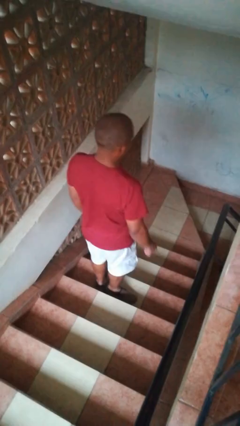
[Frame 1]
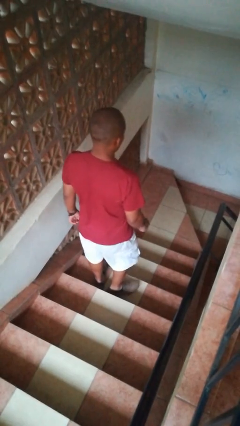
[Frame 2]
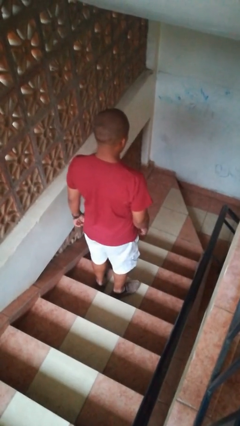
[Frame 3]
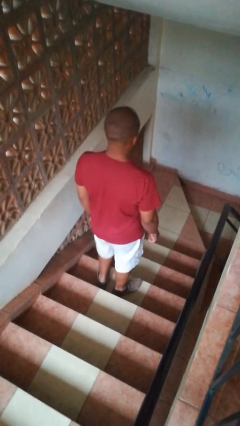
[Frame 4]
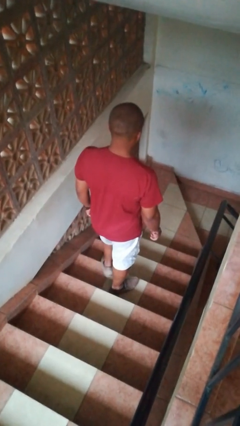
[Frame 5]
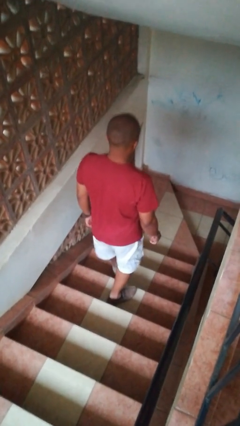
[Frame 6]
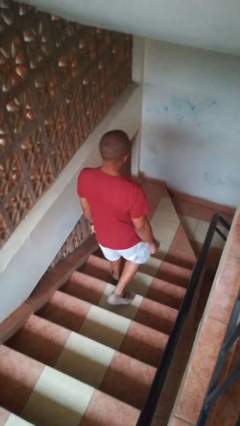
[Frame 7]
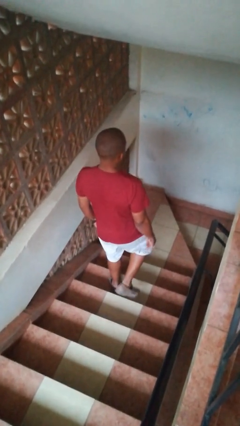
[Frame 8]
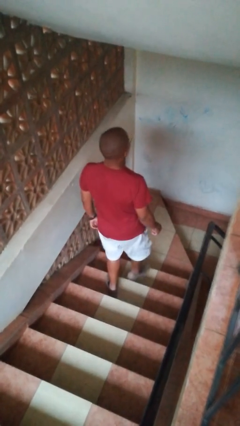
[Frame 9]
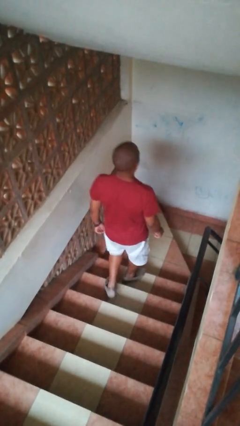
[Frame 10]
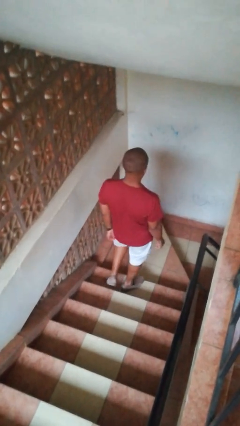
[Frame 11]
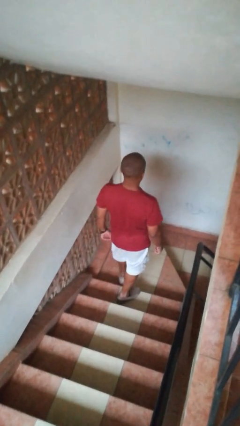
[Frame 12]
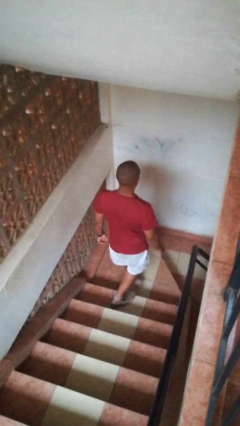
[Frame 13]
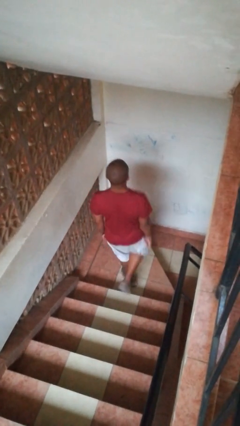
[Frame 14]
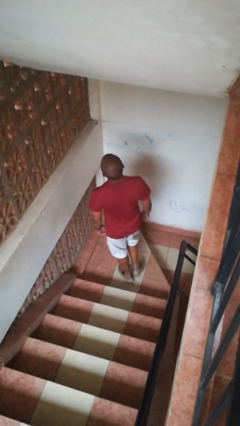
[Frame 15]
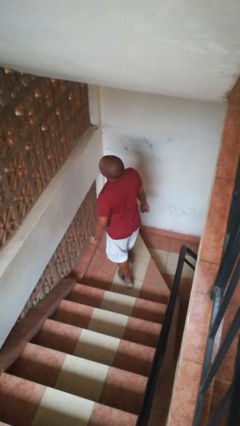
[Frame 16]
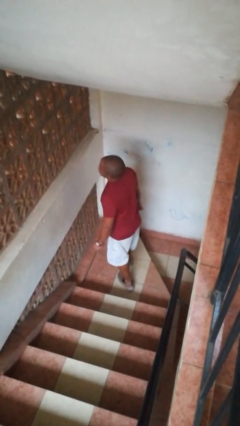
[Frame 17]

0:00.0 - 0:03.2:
person climbs down stairs

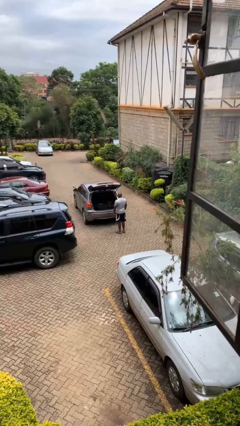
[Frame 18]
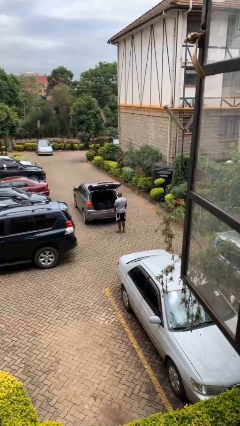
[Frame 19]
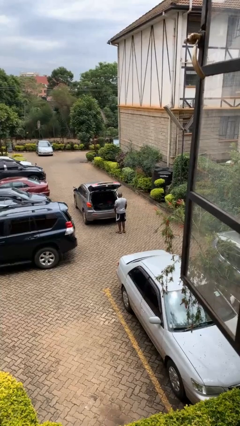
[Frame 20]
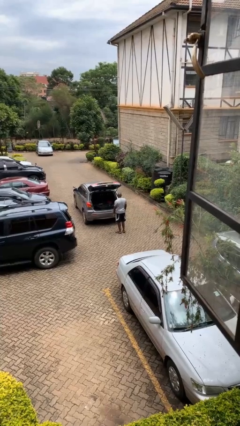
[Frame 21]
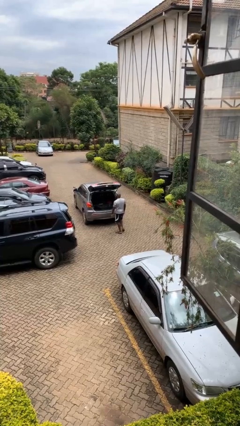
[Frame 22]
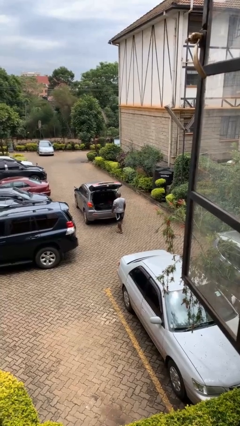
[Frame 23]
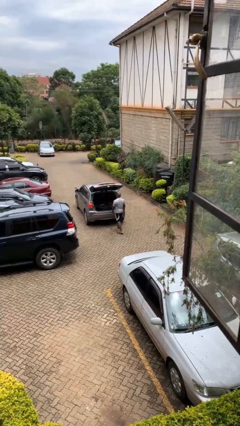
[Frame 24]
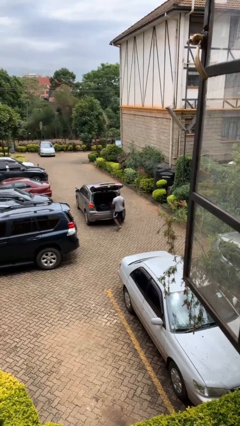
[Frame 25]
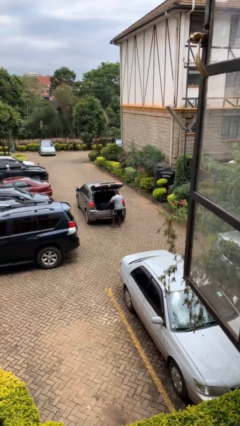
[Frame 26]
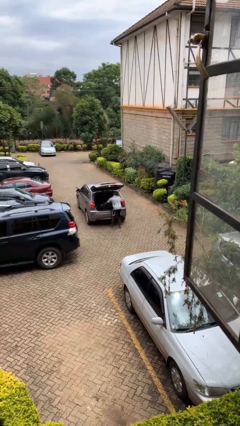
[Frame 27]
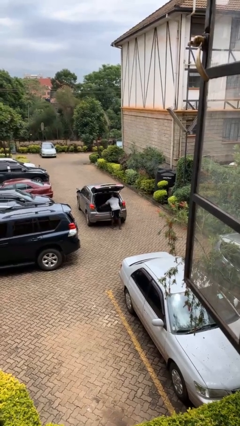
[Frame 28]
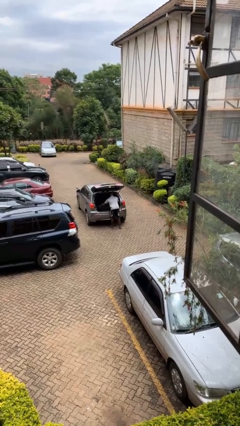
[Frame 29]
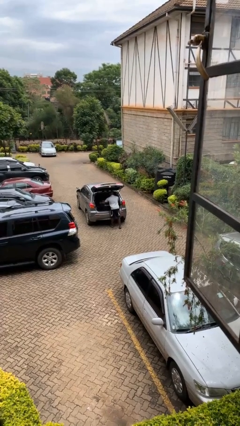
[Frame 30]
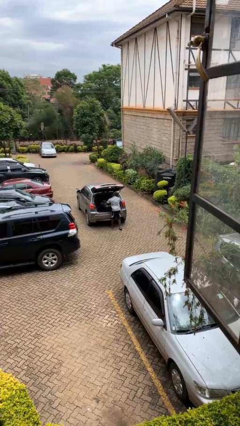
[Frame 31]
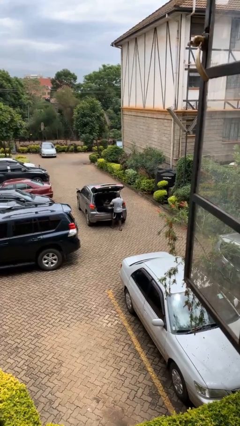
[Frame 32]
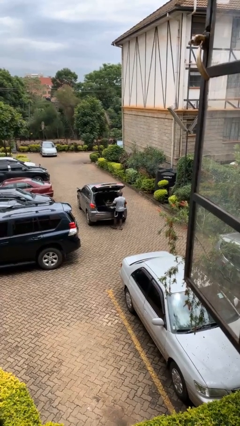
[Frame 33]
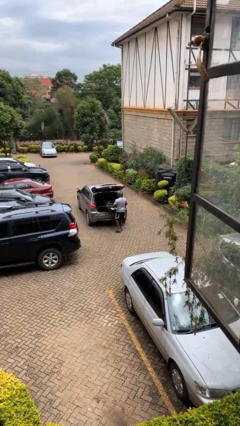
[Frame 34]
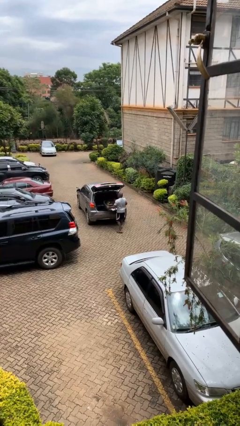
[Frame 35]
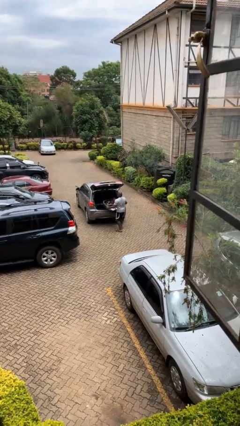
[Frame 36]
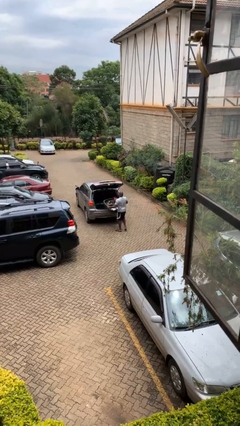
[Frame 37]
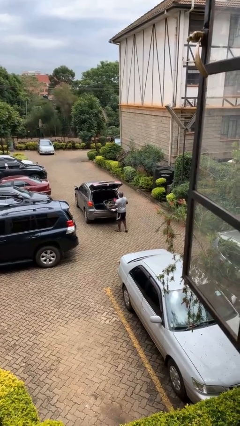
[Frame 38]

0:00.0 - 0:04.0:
person unloads car

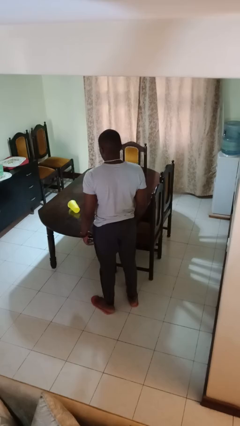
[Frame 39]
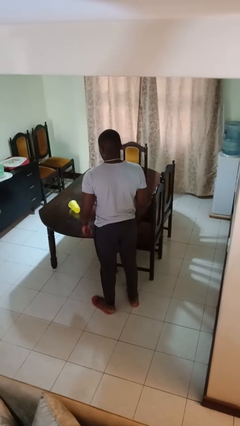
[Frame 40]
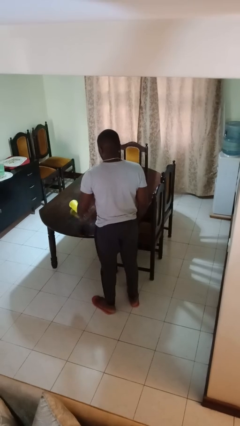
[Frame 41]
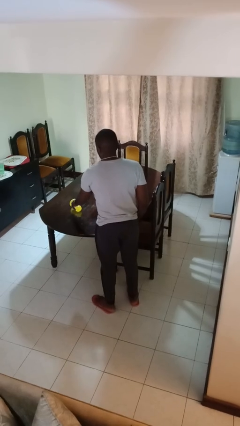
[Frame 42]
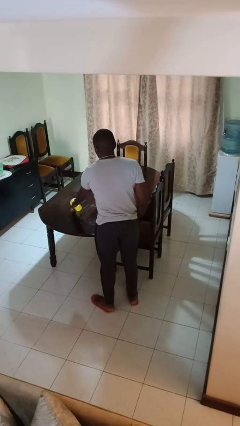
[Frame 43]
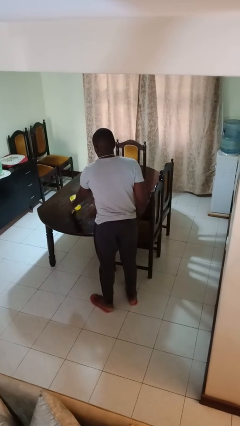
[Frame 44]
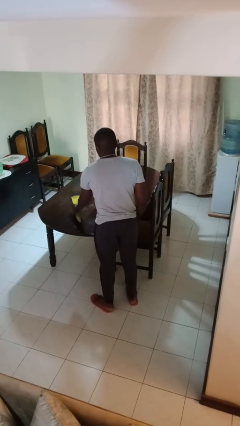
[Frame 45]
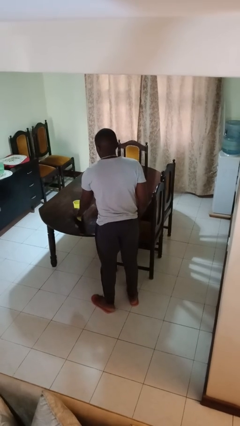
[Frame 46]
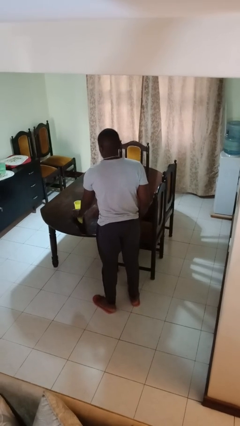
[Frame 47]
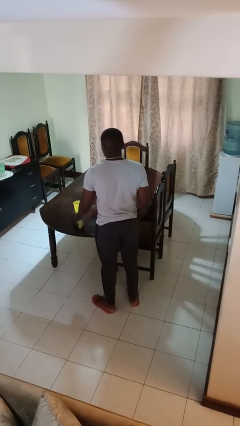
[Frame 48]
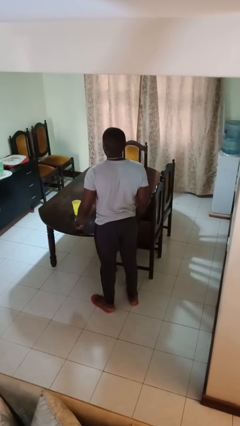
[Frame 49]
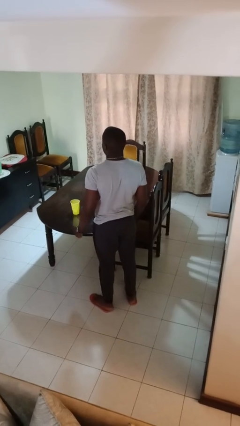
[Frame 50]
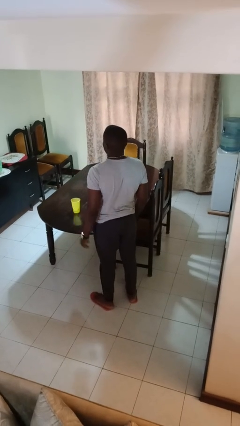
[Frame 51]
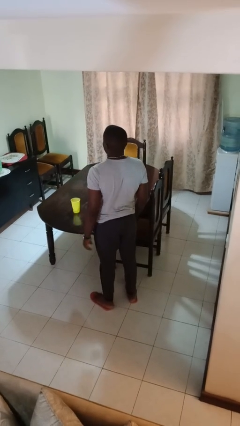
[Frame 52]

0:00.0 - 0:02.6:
person sets upright glass

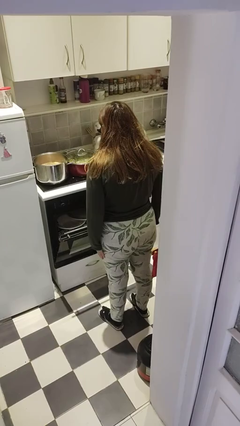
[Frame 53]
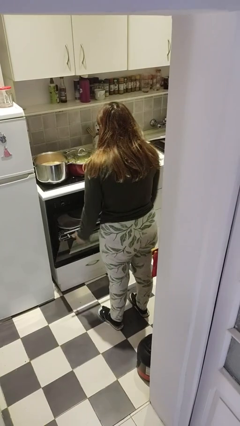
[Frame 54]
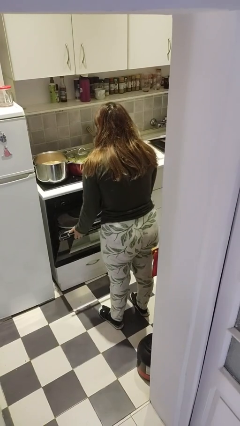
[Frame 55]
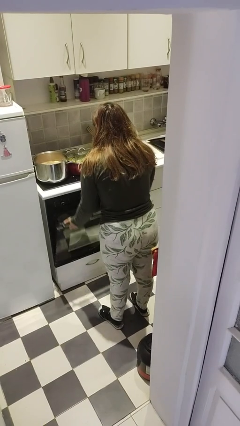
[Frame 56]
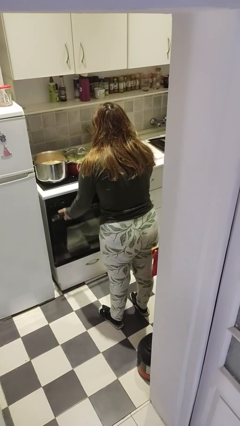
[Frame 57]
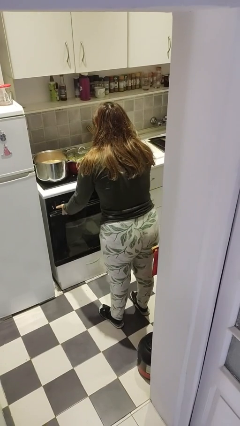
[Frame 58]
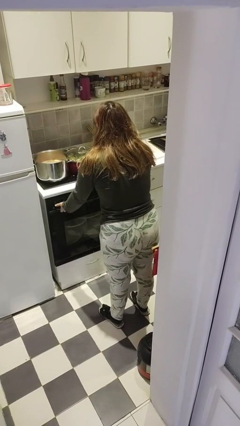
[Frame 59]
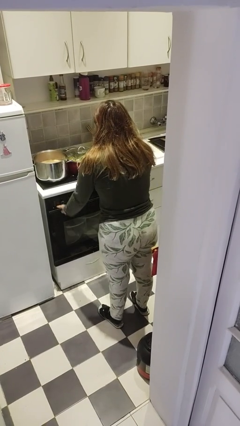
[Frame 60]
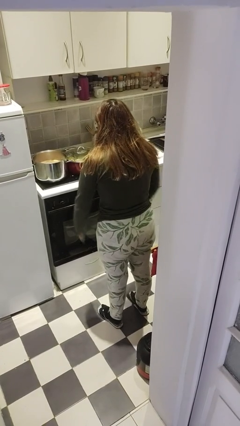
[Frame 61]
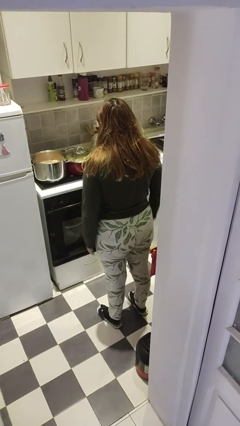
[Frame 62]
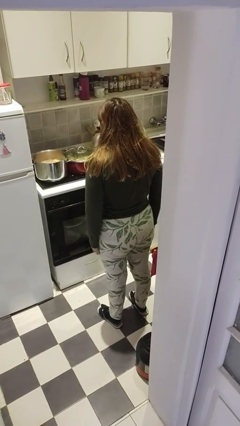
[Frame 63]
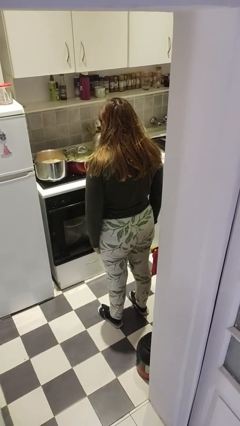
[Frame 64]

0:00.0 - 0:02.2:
person closes dishwasher

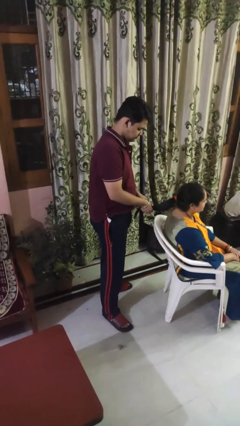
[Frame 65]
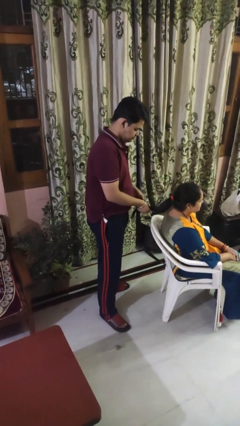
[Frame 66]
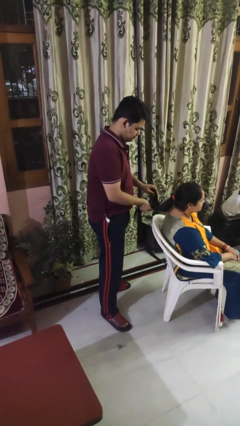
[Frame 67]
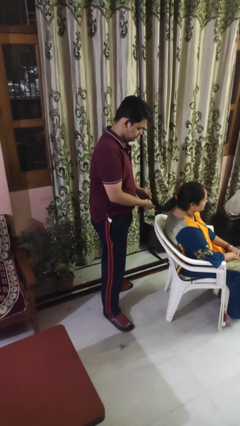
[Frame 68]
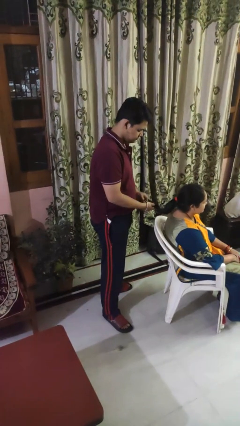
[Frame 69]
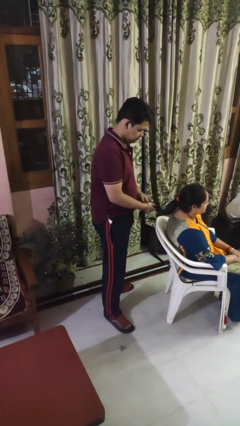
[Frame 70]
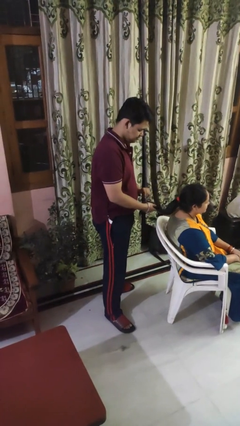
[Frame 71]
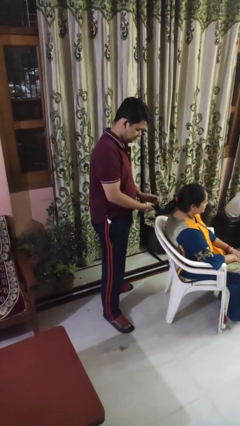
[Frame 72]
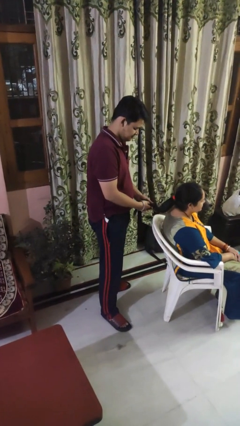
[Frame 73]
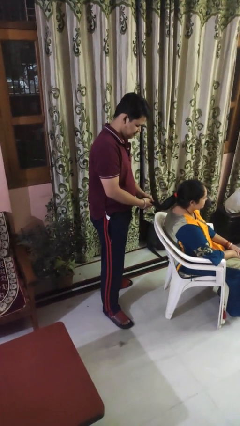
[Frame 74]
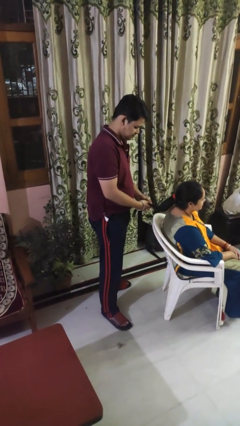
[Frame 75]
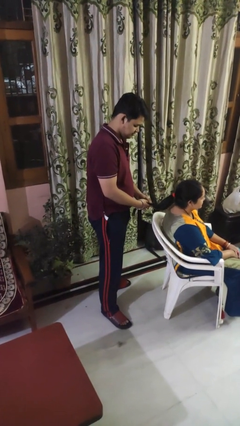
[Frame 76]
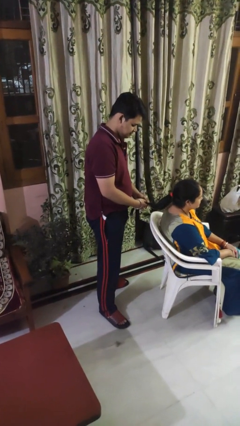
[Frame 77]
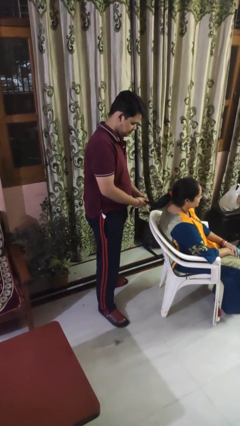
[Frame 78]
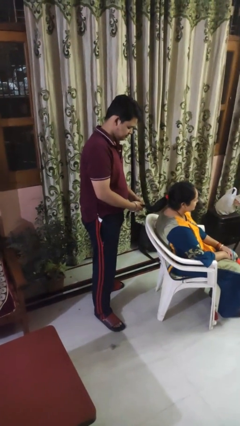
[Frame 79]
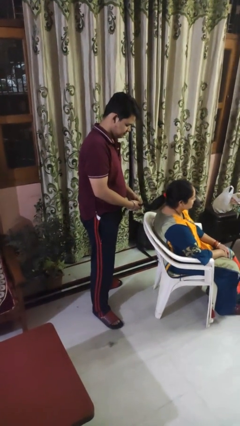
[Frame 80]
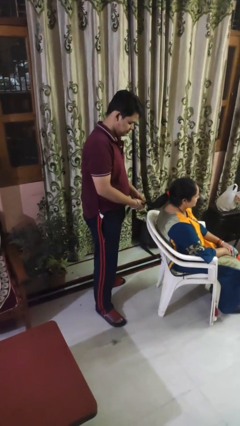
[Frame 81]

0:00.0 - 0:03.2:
person braids hair of person

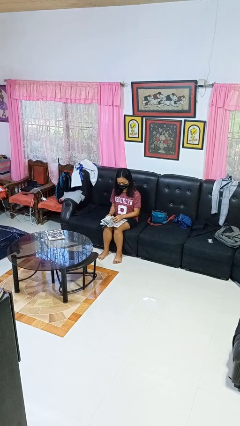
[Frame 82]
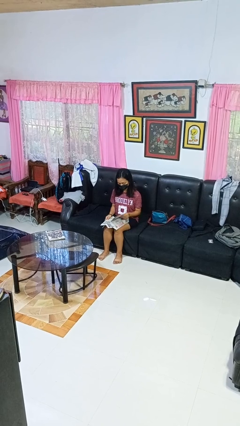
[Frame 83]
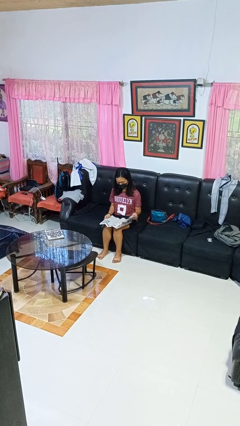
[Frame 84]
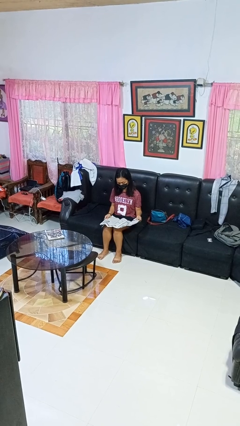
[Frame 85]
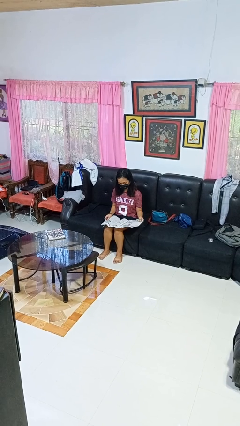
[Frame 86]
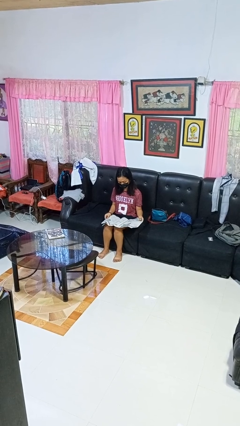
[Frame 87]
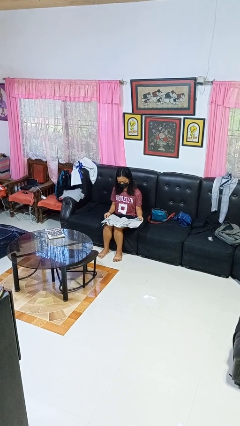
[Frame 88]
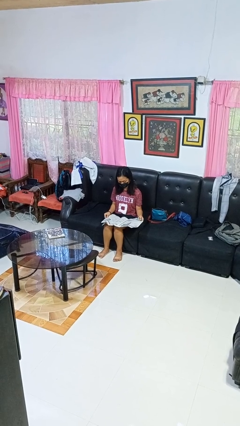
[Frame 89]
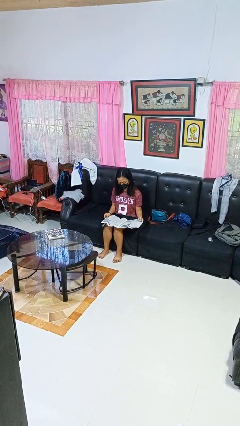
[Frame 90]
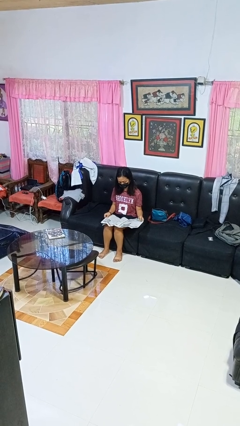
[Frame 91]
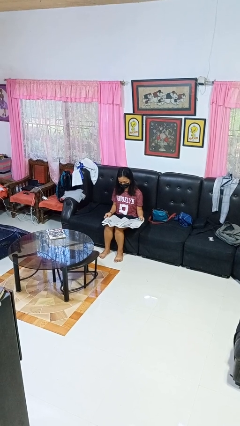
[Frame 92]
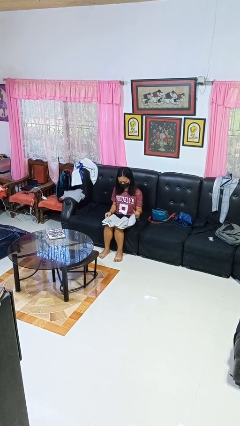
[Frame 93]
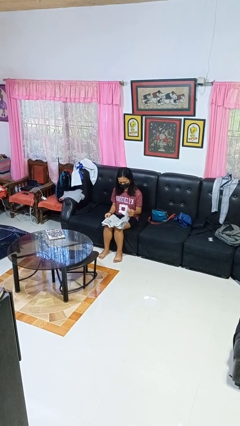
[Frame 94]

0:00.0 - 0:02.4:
person reads newspaper
